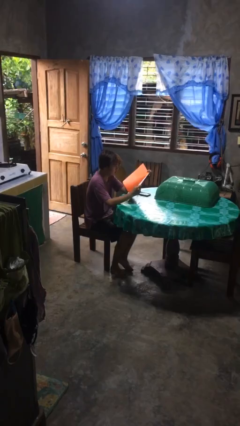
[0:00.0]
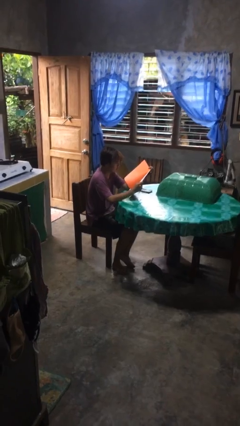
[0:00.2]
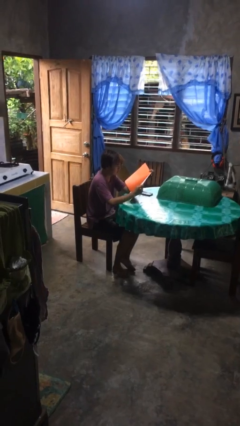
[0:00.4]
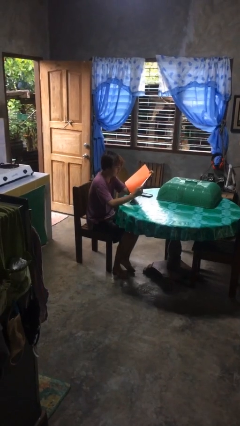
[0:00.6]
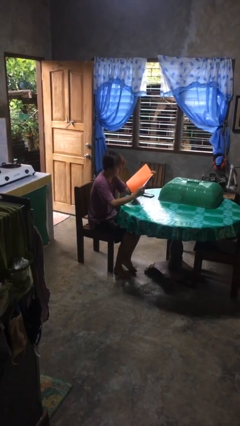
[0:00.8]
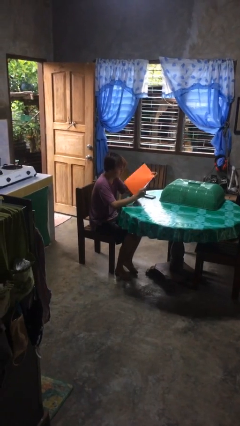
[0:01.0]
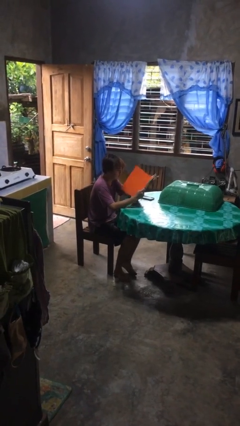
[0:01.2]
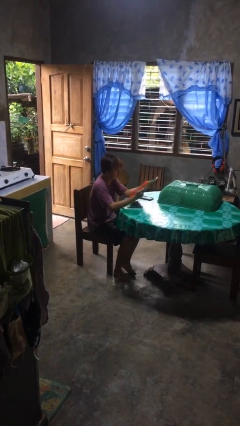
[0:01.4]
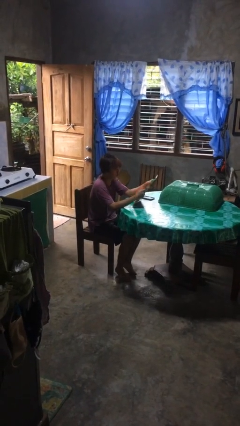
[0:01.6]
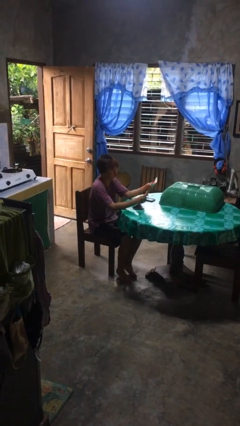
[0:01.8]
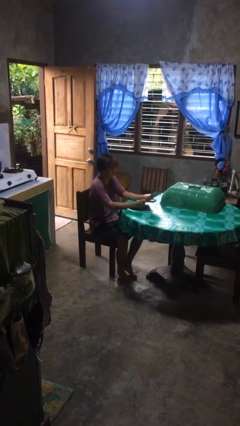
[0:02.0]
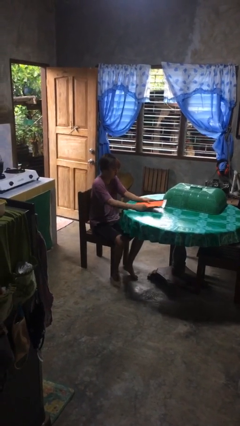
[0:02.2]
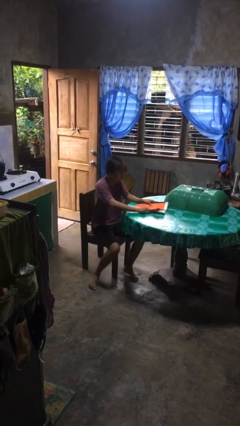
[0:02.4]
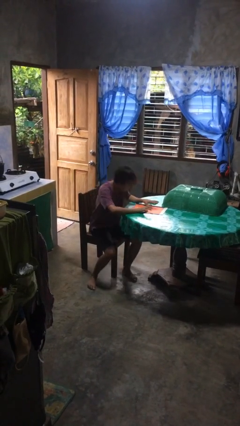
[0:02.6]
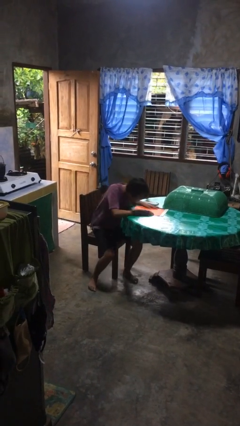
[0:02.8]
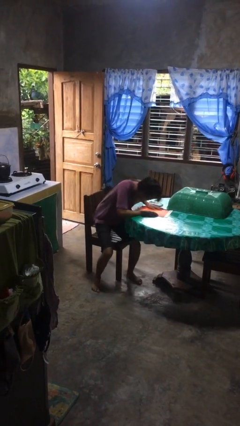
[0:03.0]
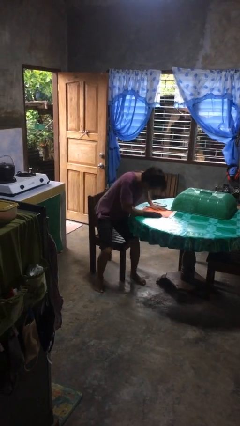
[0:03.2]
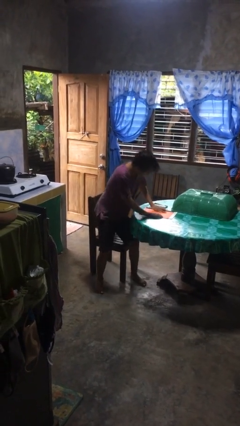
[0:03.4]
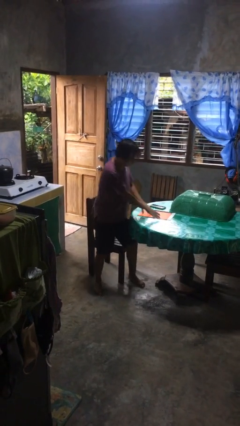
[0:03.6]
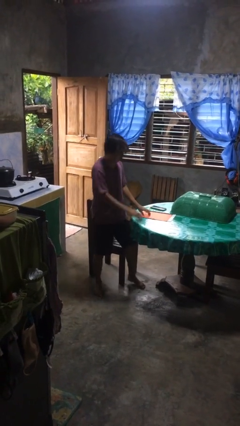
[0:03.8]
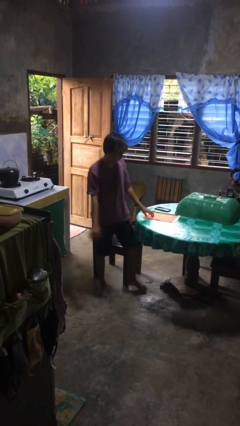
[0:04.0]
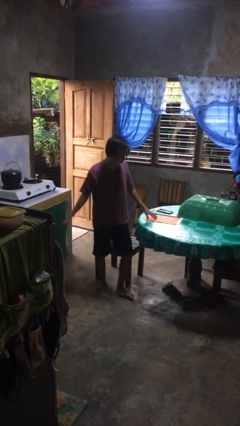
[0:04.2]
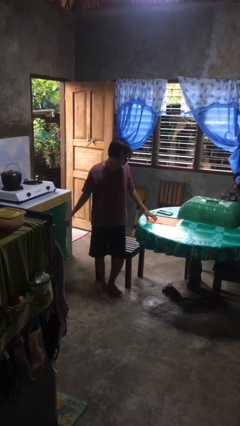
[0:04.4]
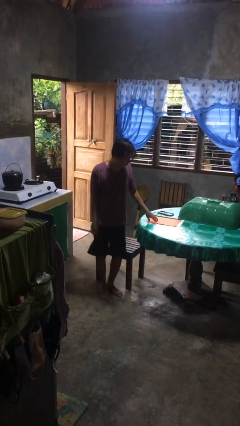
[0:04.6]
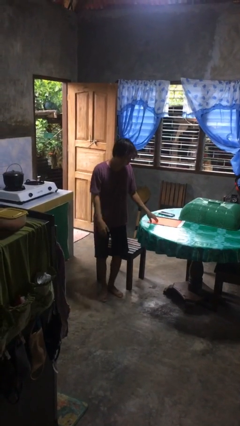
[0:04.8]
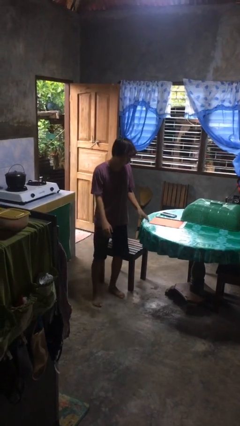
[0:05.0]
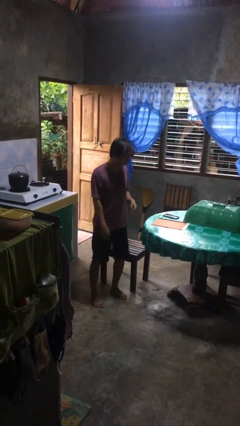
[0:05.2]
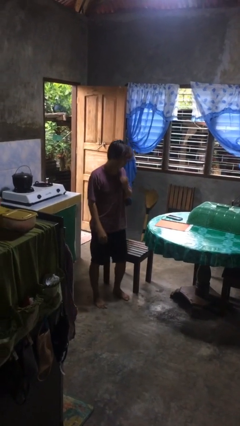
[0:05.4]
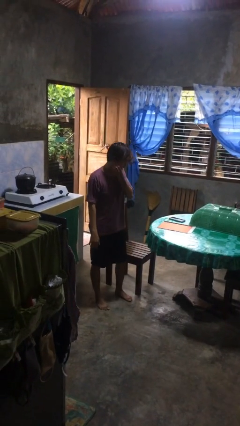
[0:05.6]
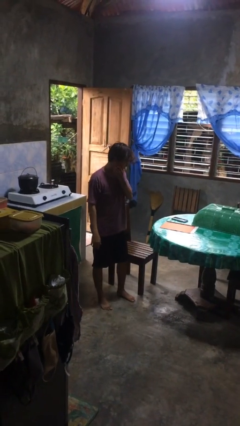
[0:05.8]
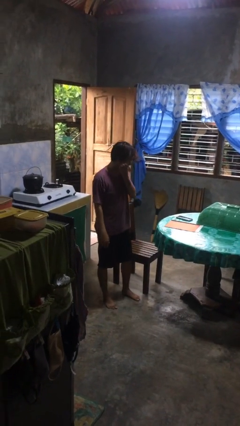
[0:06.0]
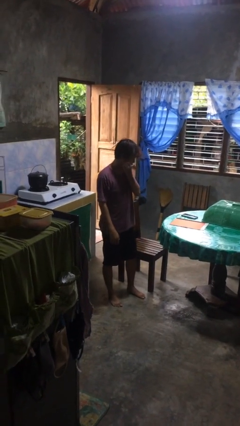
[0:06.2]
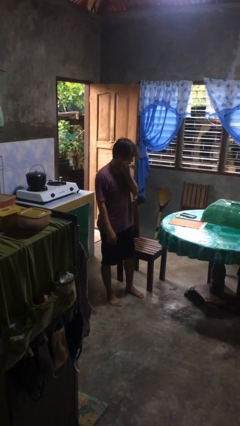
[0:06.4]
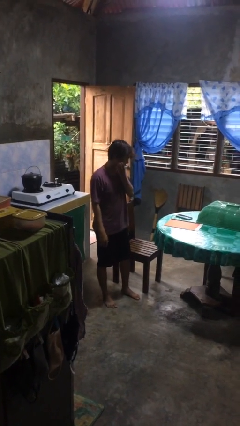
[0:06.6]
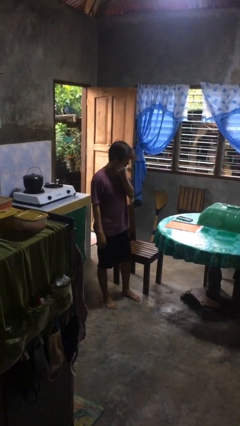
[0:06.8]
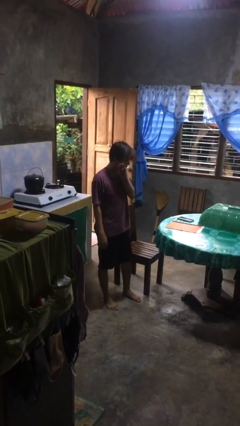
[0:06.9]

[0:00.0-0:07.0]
person stands up

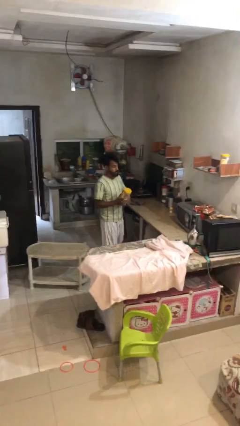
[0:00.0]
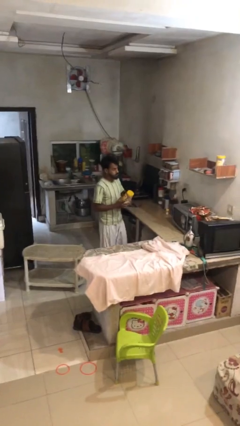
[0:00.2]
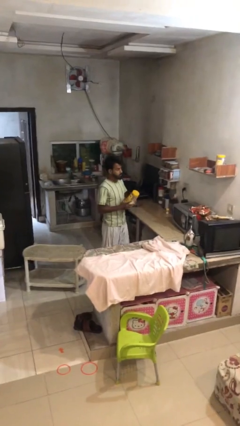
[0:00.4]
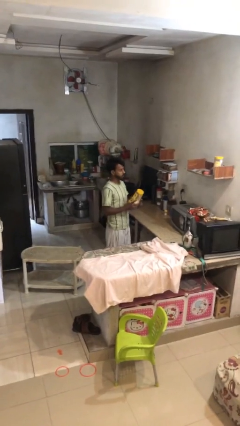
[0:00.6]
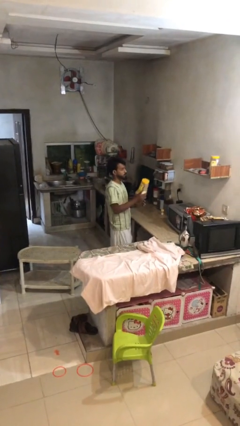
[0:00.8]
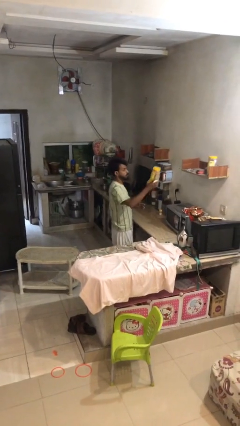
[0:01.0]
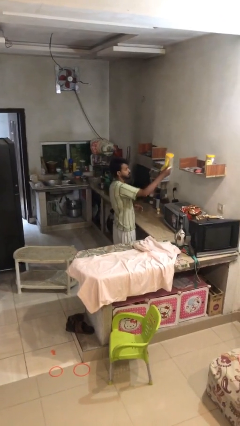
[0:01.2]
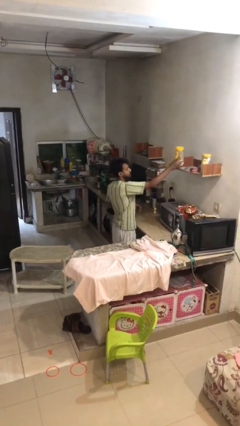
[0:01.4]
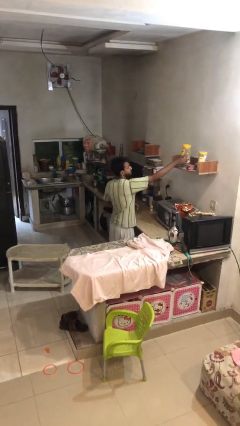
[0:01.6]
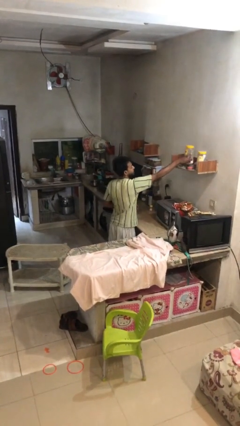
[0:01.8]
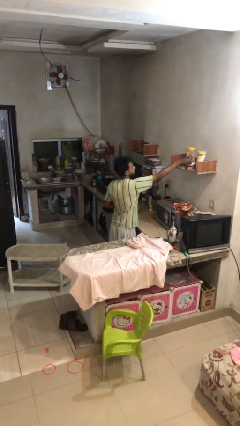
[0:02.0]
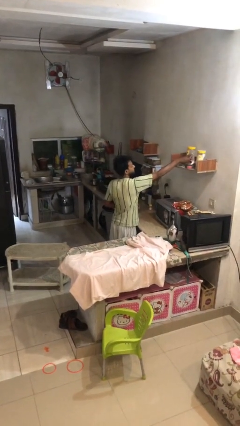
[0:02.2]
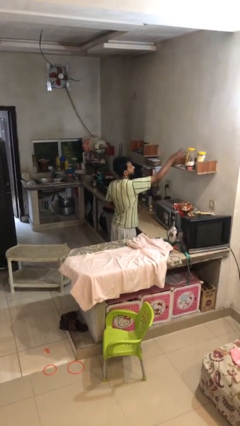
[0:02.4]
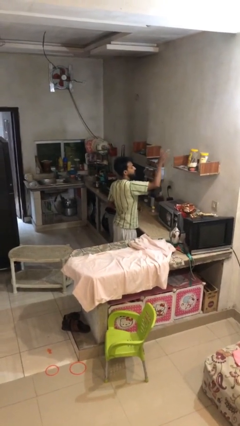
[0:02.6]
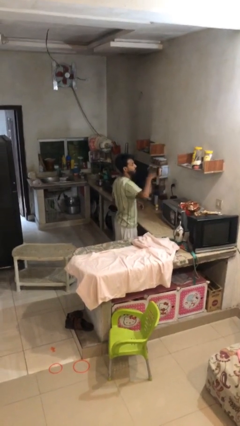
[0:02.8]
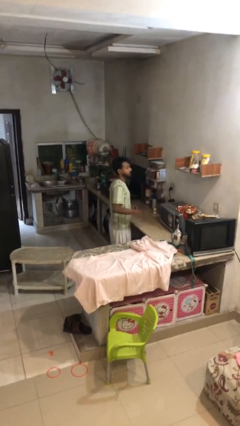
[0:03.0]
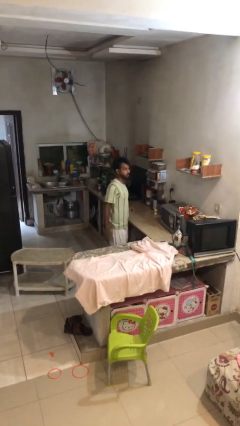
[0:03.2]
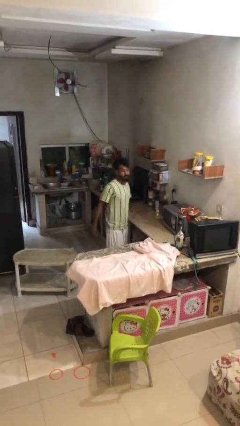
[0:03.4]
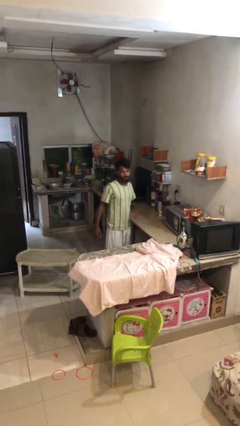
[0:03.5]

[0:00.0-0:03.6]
person puts down object on shelf

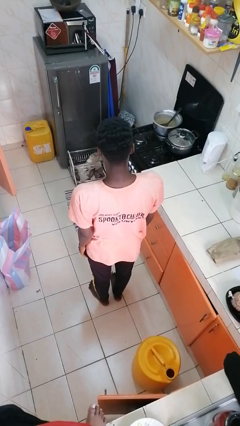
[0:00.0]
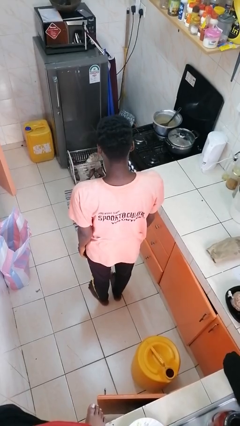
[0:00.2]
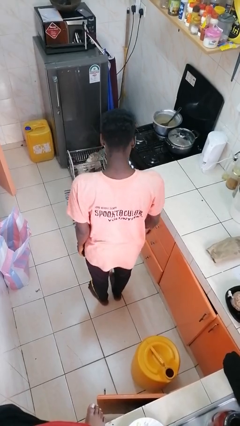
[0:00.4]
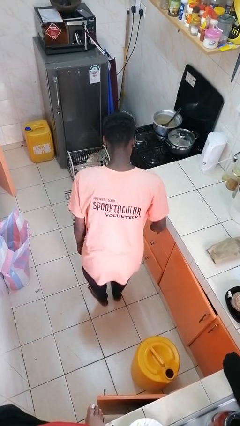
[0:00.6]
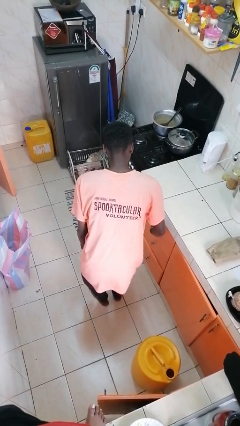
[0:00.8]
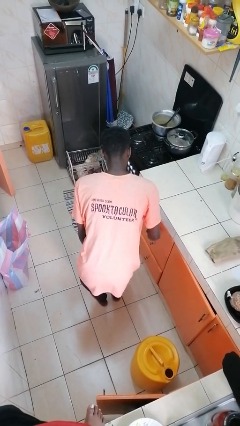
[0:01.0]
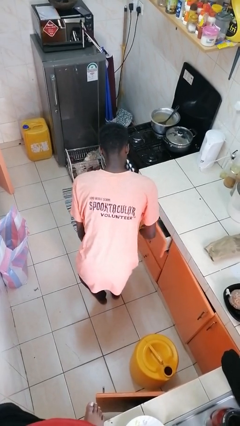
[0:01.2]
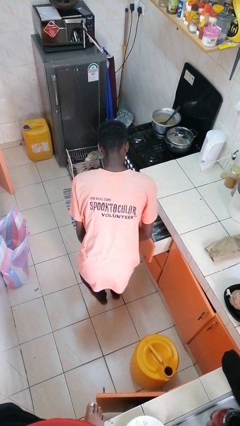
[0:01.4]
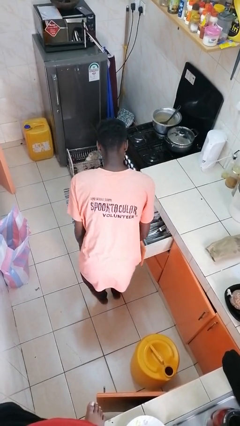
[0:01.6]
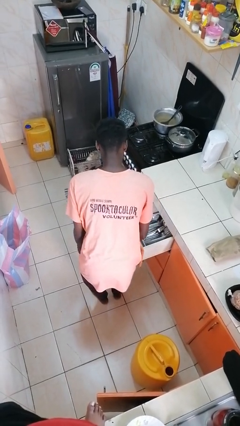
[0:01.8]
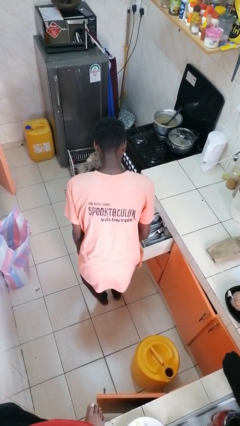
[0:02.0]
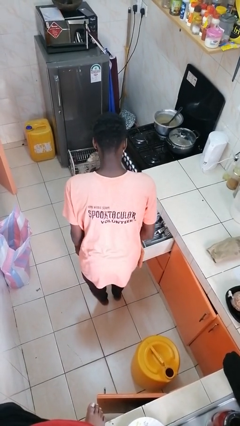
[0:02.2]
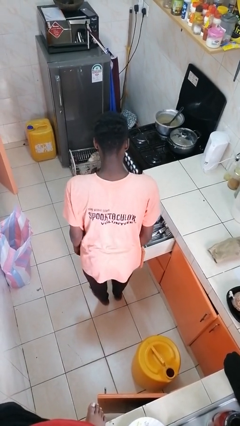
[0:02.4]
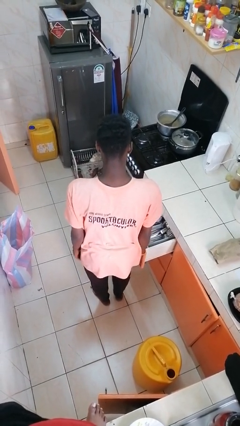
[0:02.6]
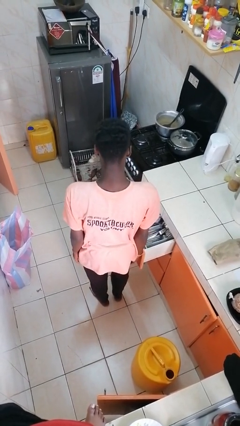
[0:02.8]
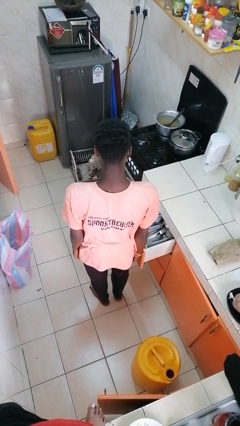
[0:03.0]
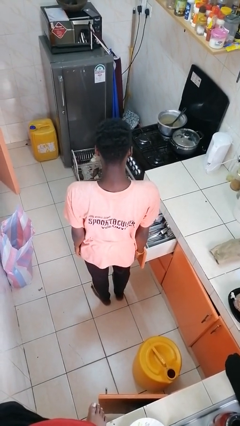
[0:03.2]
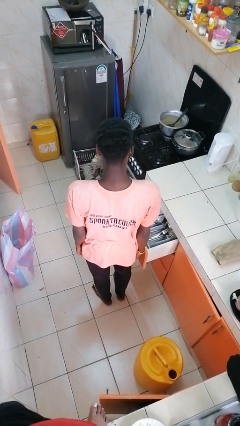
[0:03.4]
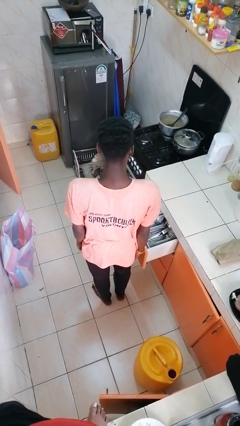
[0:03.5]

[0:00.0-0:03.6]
person opens kitchen drawer

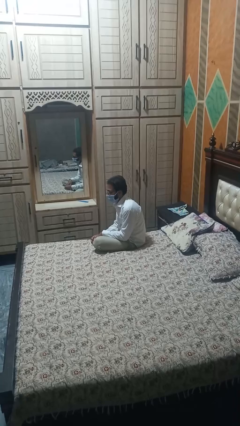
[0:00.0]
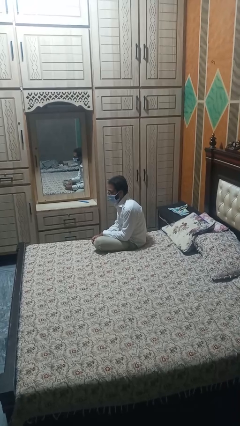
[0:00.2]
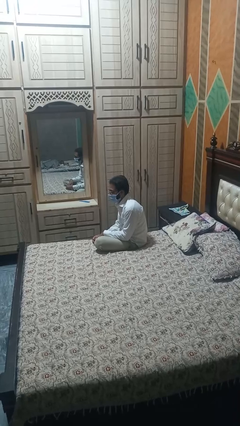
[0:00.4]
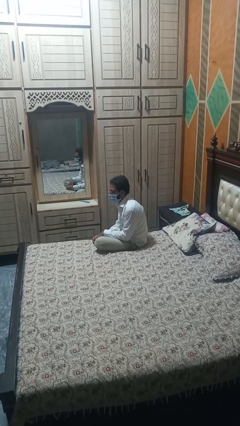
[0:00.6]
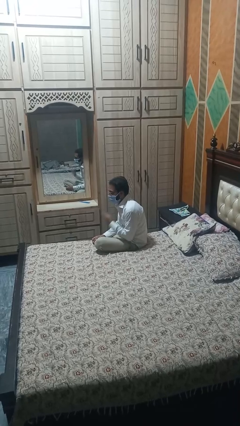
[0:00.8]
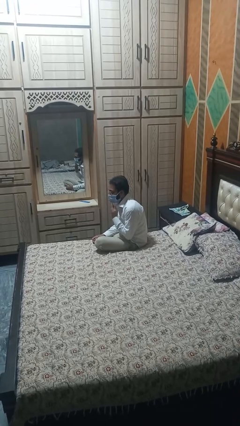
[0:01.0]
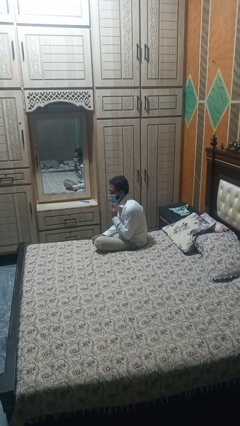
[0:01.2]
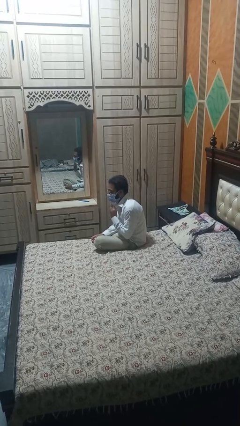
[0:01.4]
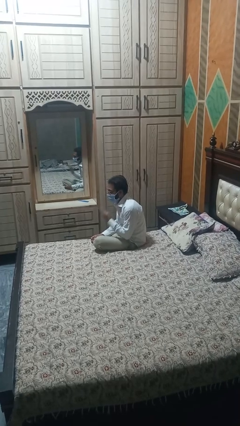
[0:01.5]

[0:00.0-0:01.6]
person strokes chin

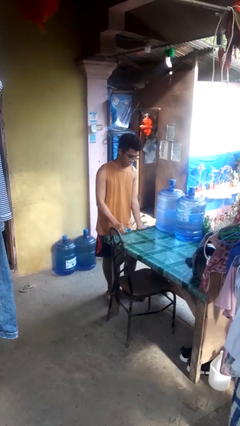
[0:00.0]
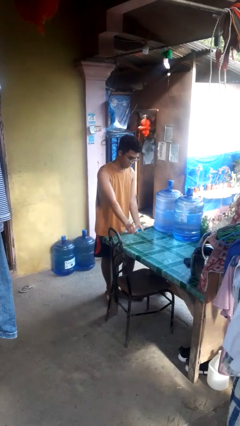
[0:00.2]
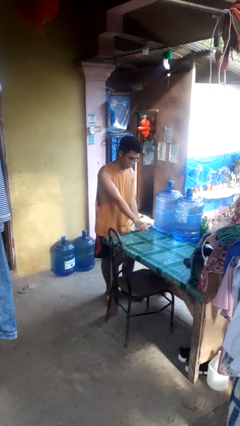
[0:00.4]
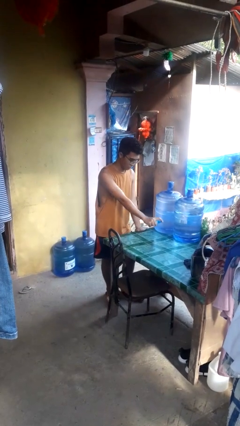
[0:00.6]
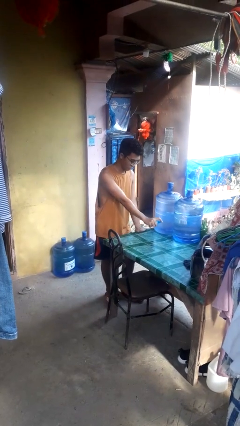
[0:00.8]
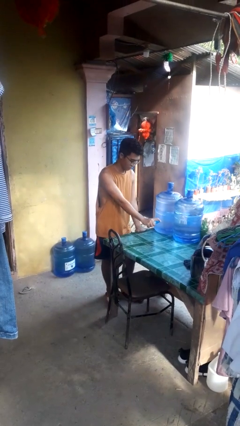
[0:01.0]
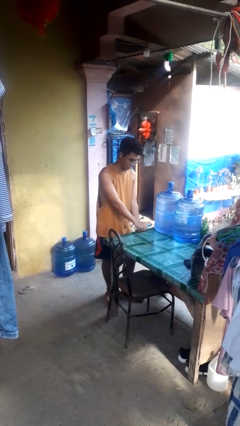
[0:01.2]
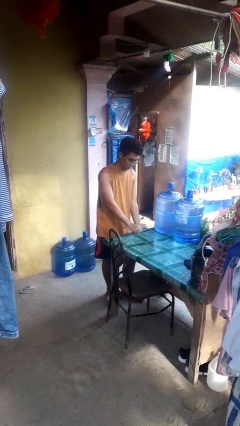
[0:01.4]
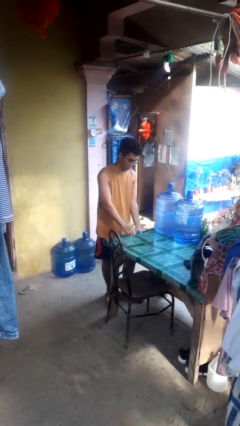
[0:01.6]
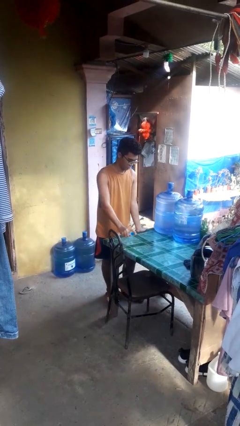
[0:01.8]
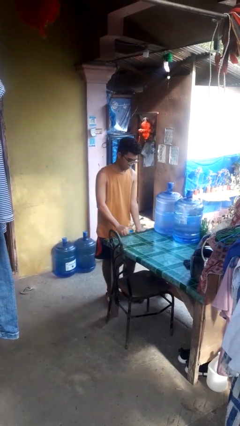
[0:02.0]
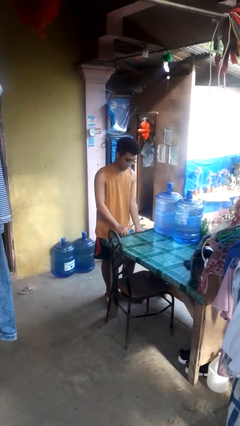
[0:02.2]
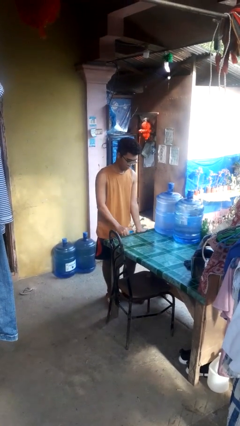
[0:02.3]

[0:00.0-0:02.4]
person sprays from bottle
